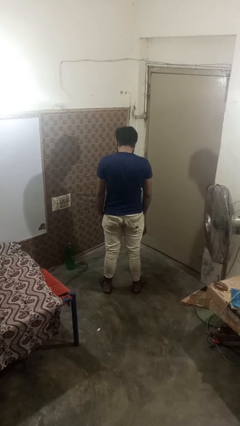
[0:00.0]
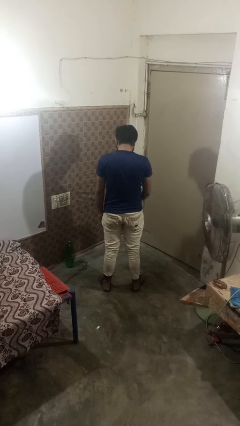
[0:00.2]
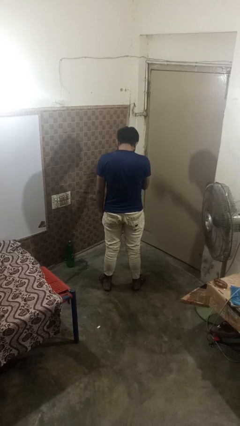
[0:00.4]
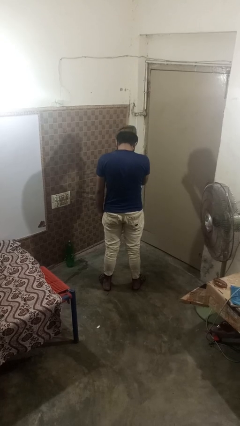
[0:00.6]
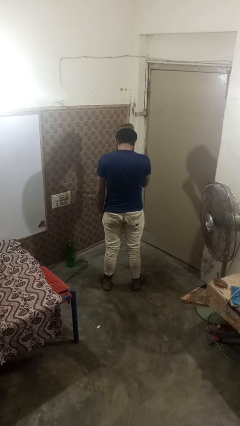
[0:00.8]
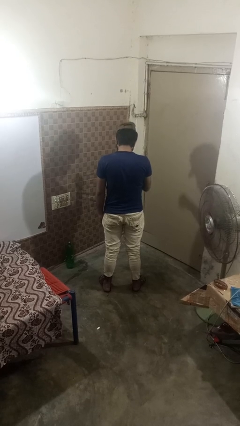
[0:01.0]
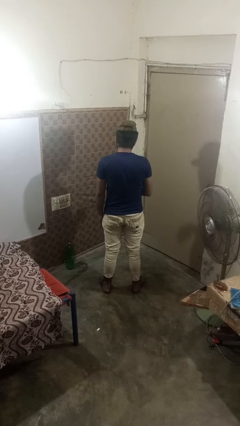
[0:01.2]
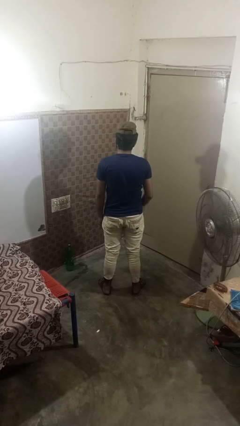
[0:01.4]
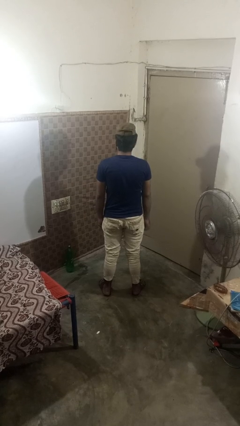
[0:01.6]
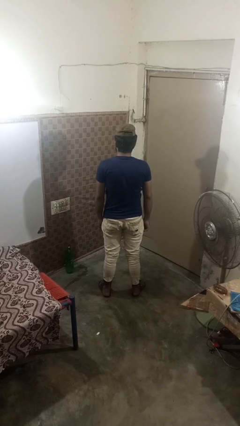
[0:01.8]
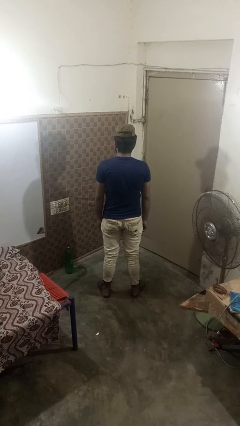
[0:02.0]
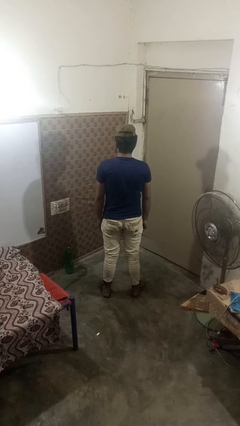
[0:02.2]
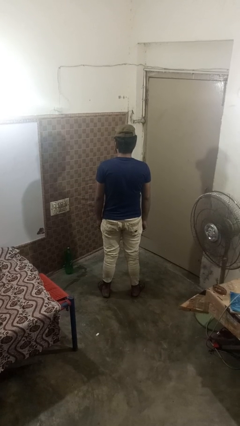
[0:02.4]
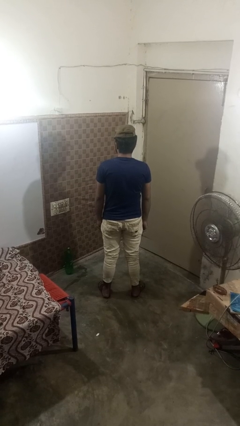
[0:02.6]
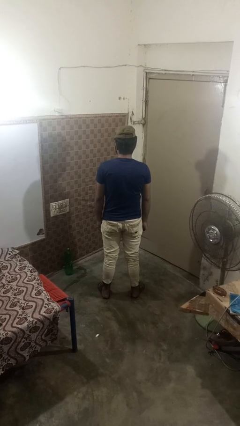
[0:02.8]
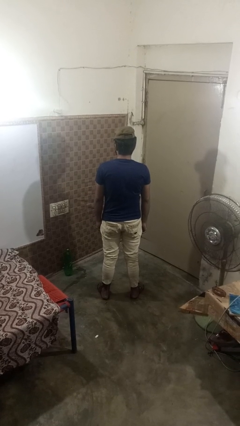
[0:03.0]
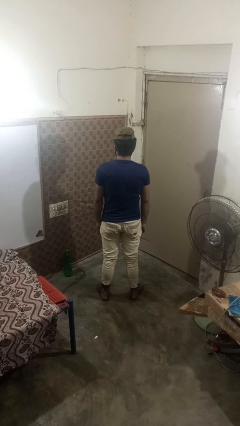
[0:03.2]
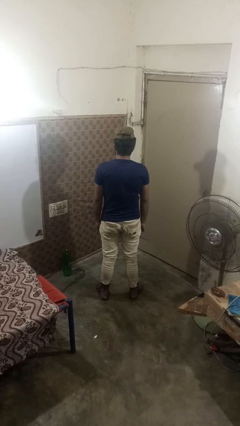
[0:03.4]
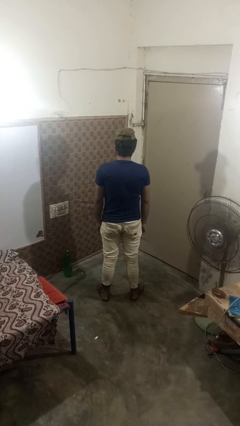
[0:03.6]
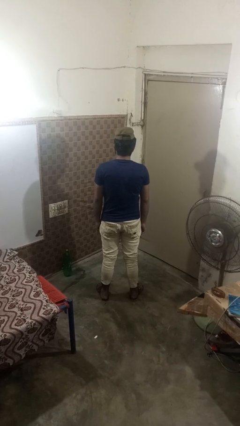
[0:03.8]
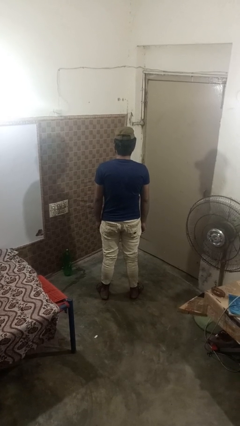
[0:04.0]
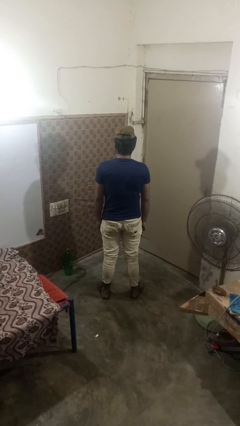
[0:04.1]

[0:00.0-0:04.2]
person puts on hat

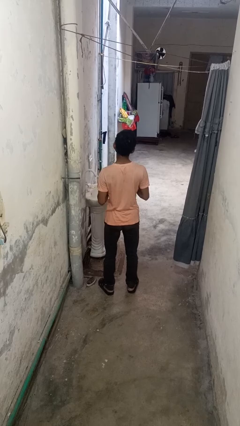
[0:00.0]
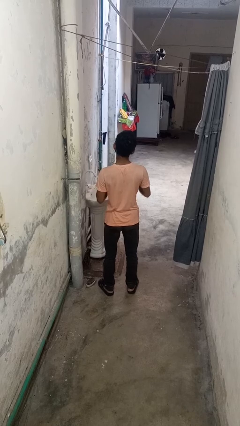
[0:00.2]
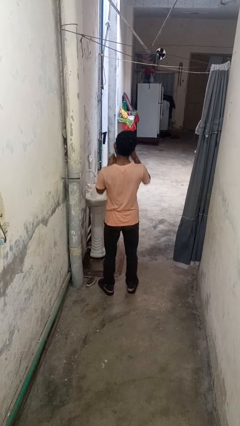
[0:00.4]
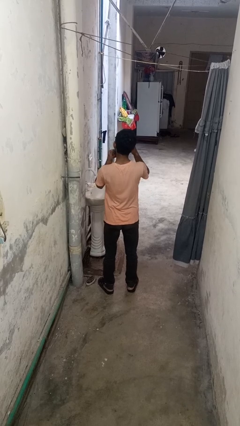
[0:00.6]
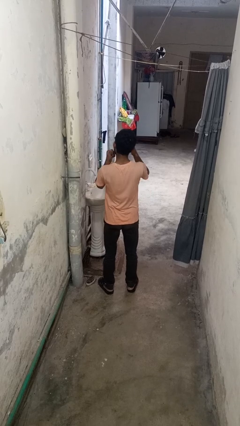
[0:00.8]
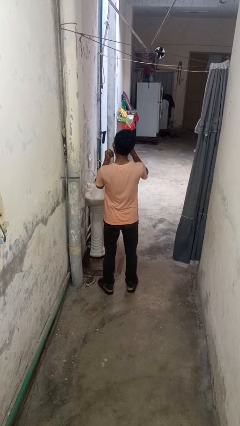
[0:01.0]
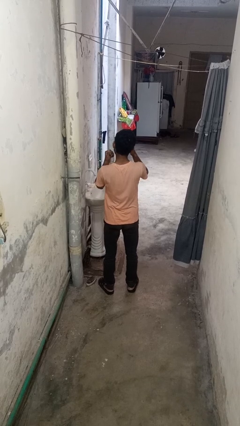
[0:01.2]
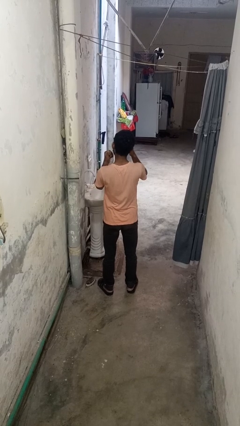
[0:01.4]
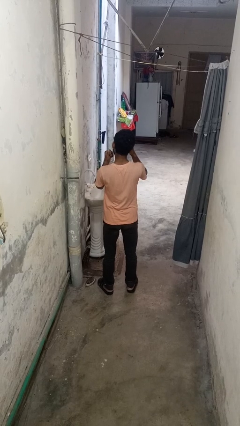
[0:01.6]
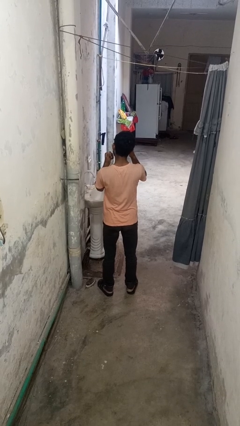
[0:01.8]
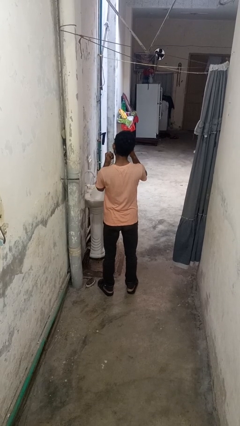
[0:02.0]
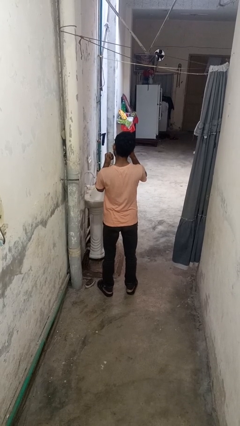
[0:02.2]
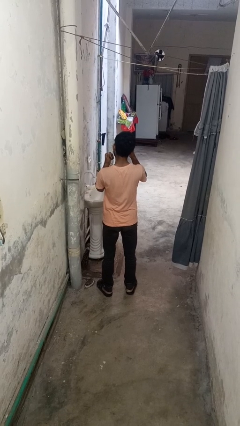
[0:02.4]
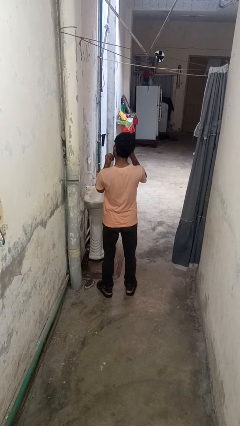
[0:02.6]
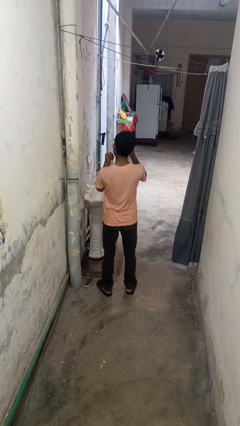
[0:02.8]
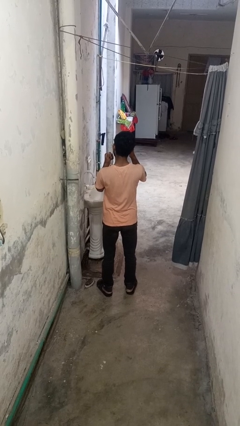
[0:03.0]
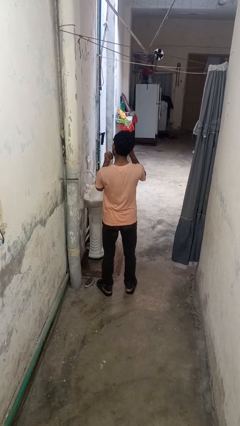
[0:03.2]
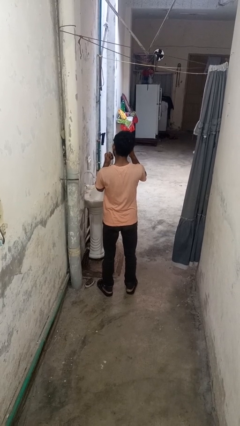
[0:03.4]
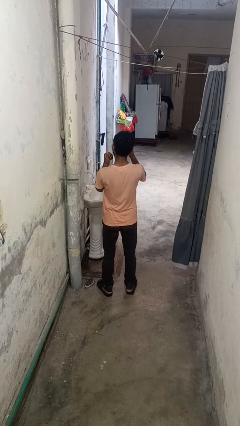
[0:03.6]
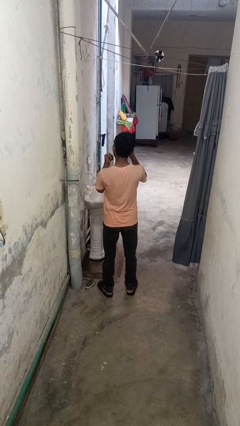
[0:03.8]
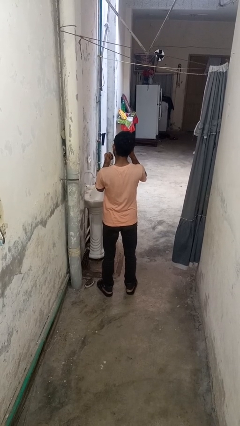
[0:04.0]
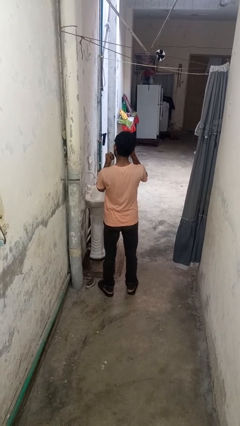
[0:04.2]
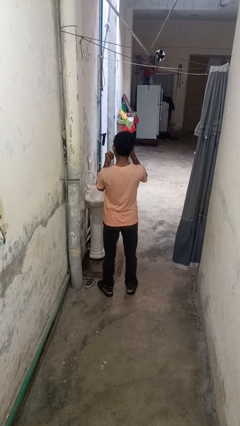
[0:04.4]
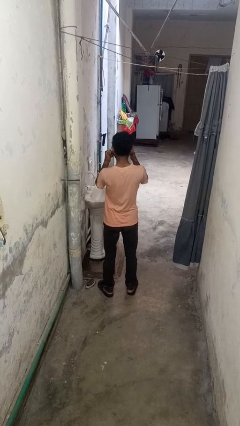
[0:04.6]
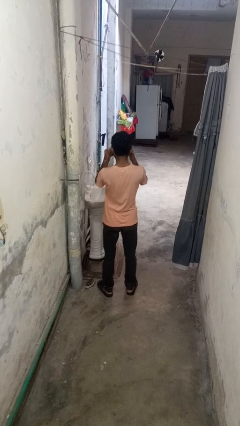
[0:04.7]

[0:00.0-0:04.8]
person flosses

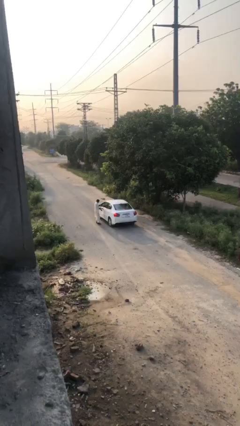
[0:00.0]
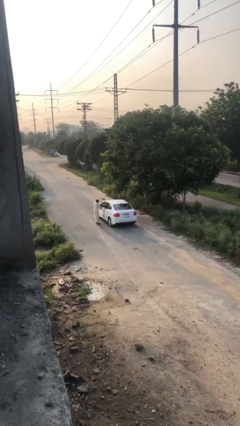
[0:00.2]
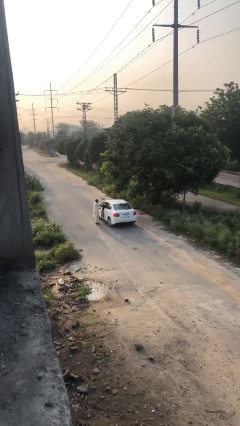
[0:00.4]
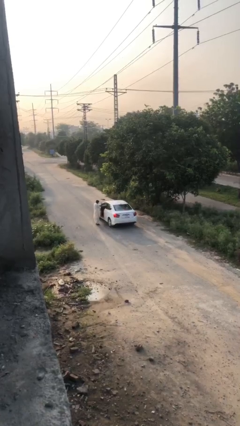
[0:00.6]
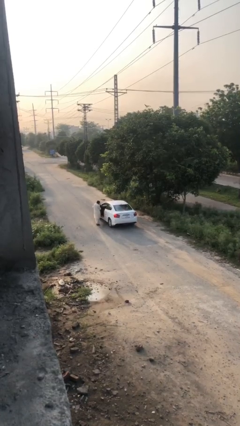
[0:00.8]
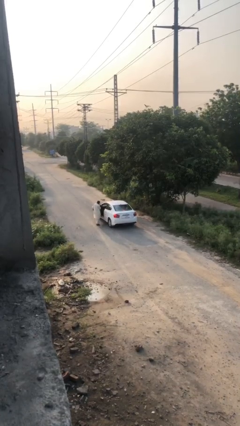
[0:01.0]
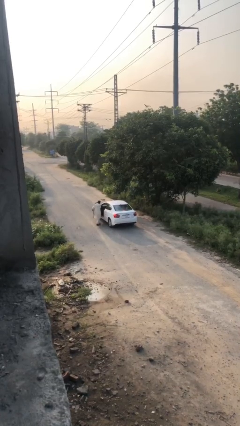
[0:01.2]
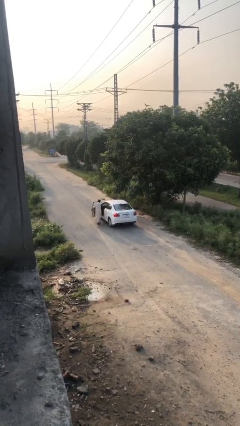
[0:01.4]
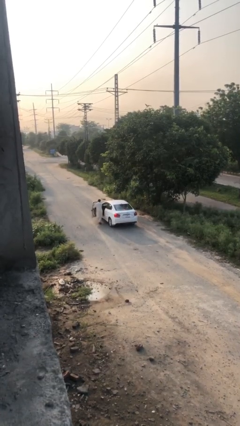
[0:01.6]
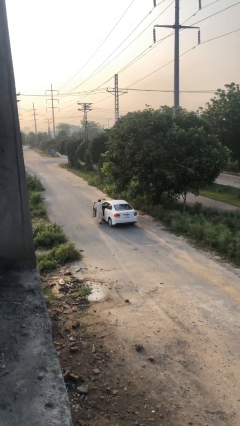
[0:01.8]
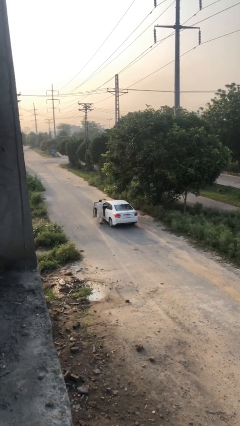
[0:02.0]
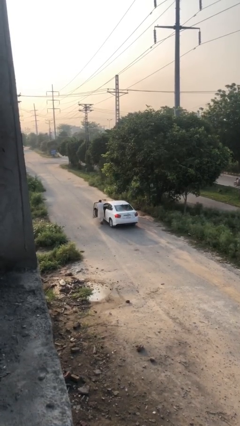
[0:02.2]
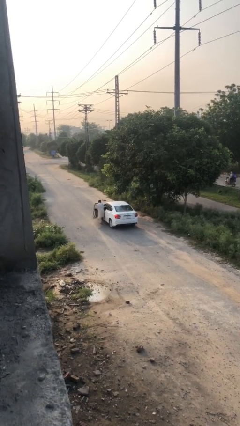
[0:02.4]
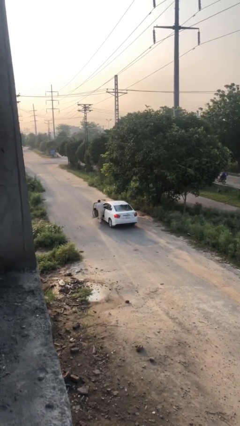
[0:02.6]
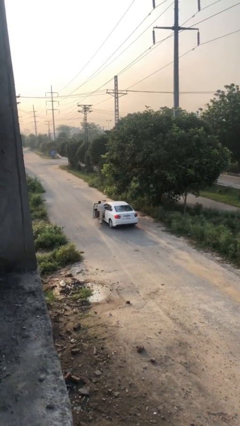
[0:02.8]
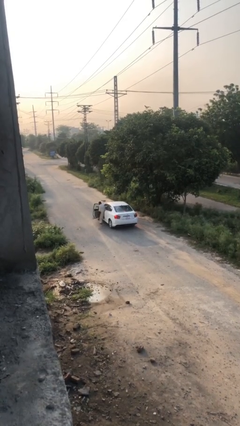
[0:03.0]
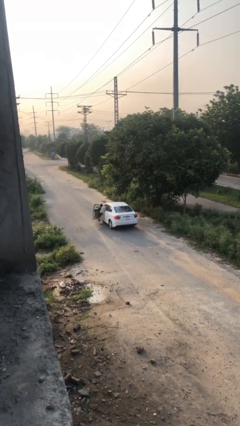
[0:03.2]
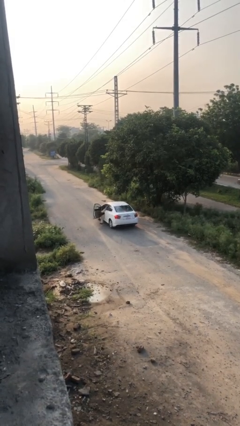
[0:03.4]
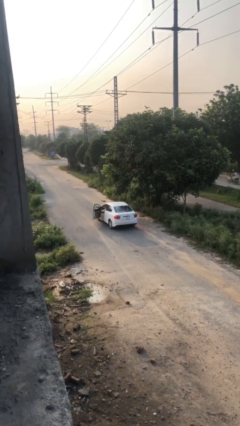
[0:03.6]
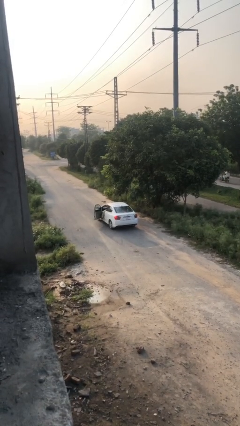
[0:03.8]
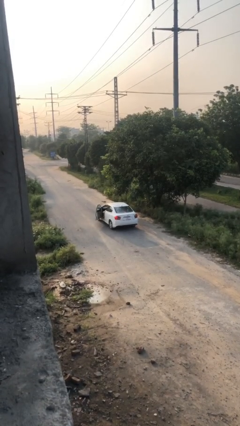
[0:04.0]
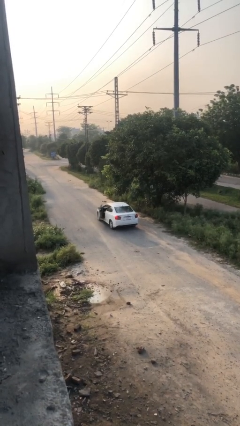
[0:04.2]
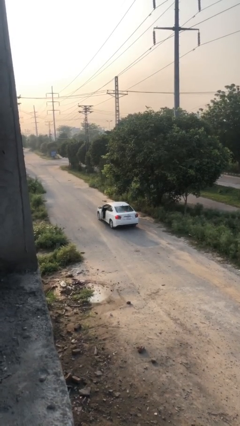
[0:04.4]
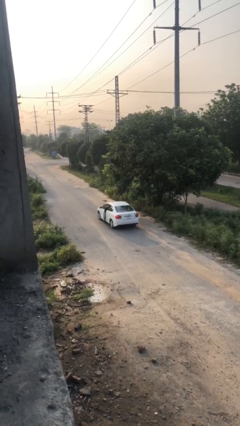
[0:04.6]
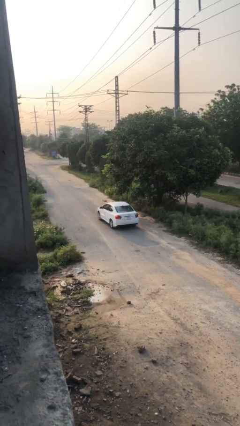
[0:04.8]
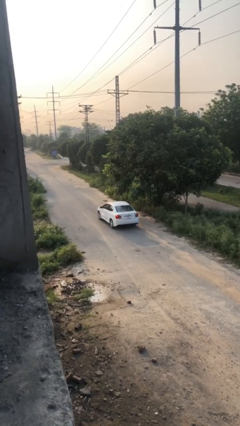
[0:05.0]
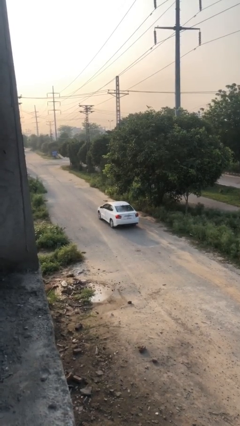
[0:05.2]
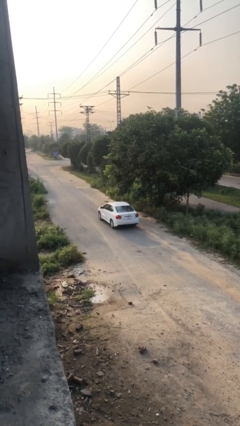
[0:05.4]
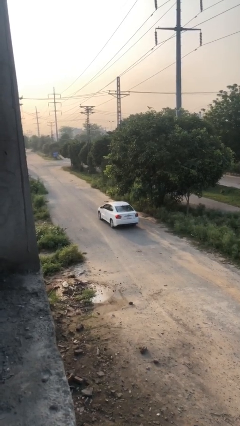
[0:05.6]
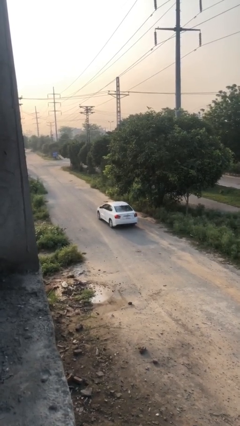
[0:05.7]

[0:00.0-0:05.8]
car picks up person

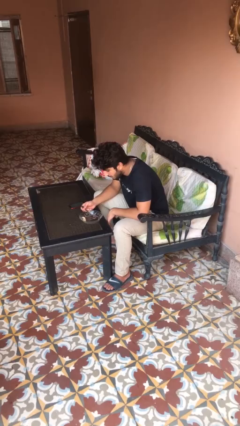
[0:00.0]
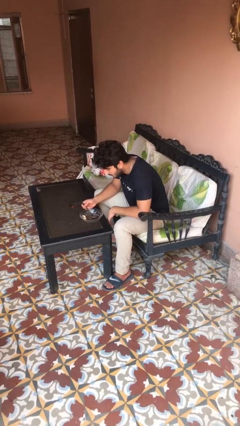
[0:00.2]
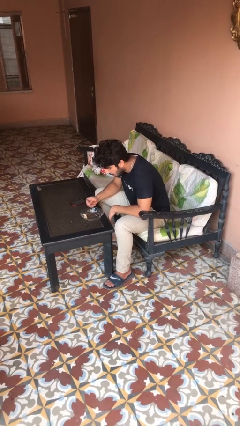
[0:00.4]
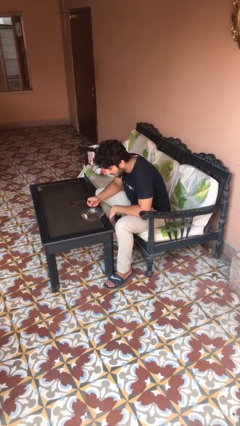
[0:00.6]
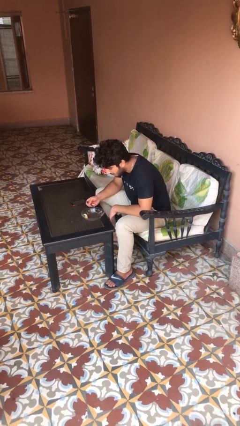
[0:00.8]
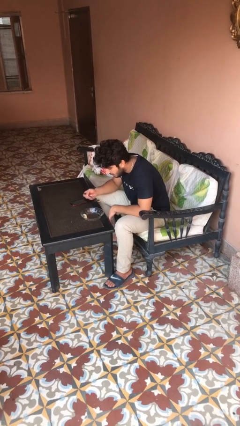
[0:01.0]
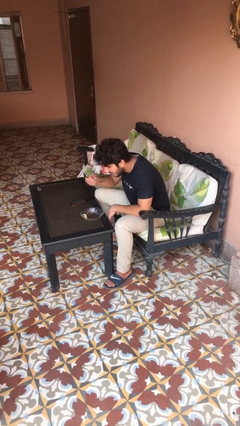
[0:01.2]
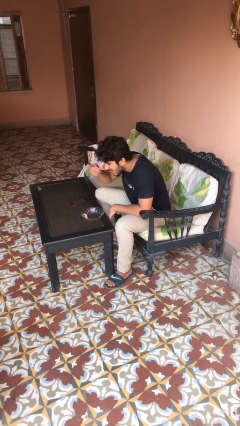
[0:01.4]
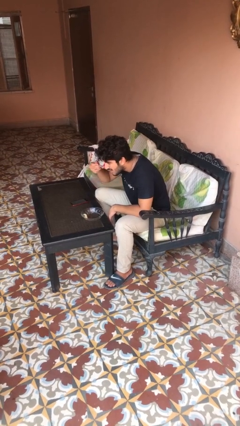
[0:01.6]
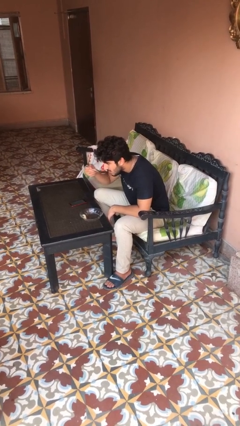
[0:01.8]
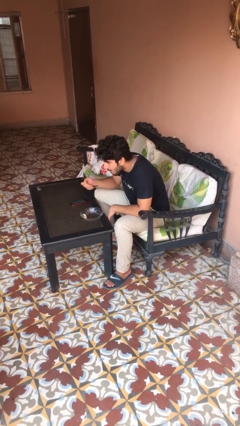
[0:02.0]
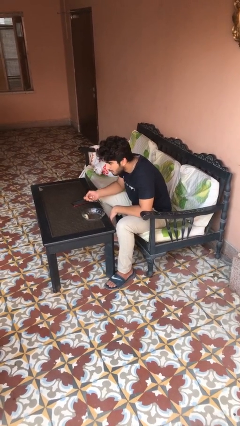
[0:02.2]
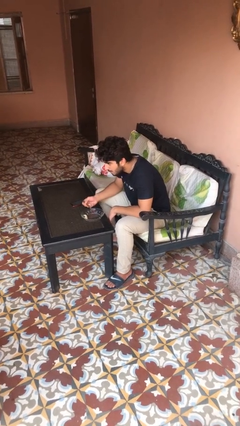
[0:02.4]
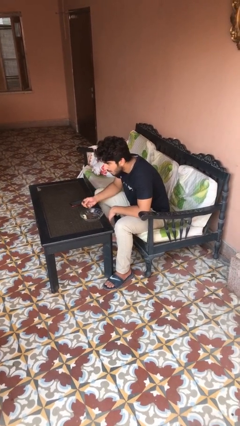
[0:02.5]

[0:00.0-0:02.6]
person eats with utensil

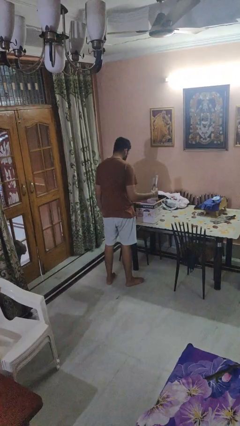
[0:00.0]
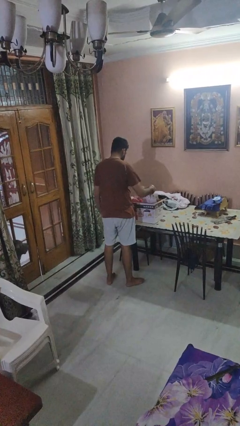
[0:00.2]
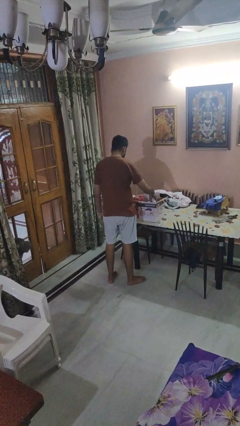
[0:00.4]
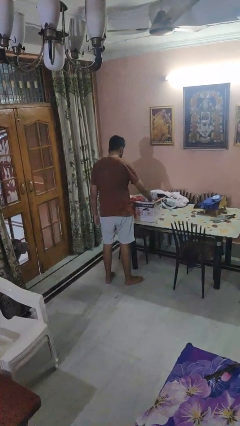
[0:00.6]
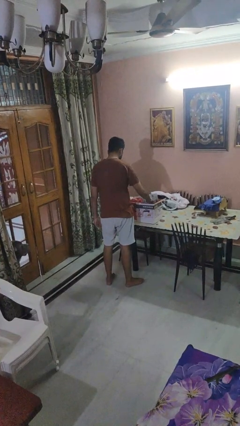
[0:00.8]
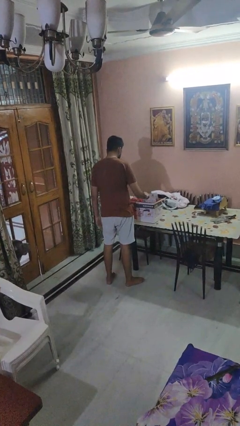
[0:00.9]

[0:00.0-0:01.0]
person puts object into box
